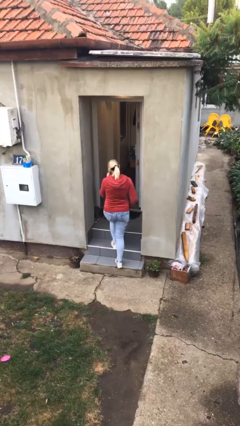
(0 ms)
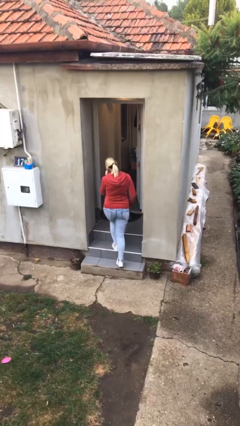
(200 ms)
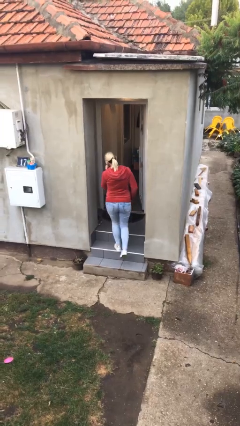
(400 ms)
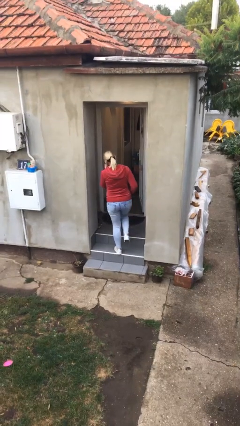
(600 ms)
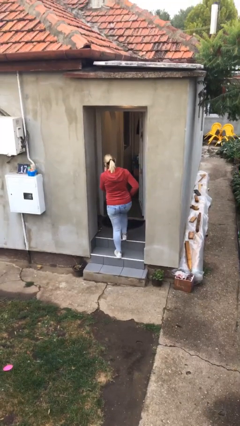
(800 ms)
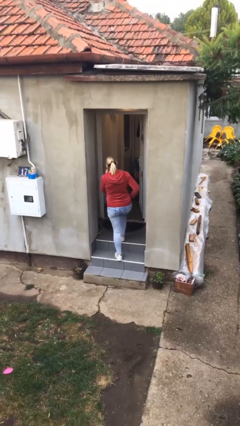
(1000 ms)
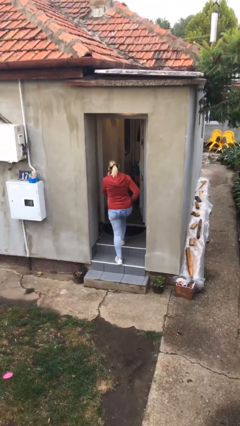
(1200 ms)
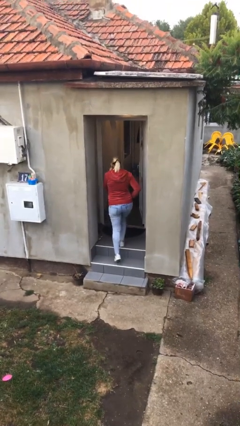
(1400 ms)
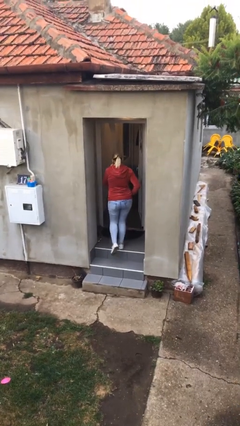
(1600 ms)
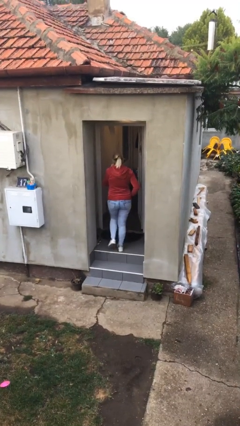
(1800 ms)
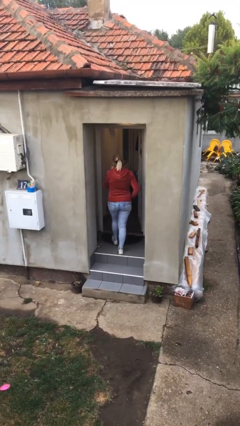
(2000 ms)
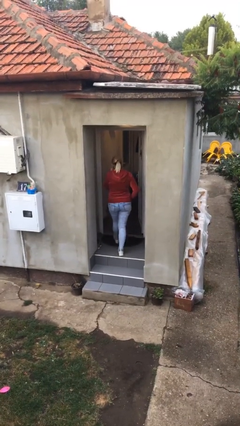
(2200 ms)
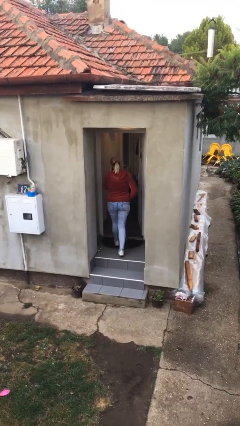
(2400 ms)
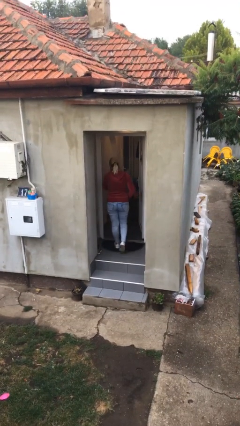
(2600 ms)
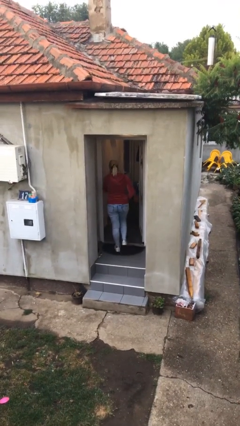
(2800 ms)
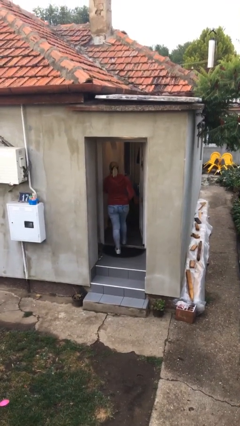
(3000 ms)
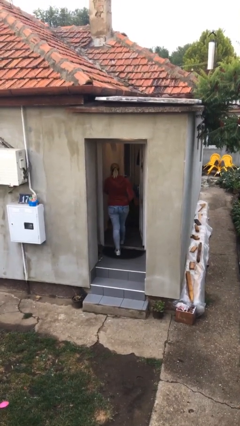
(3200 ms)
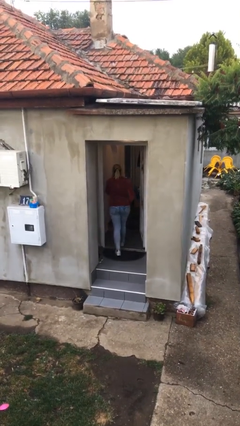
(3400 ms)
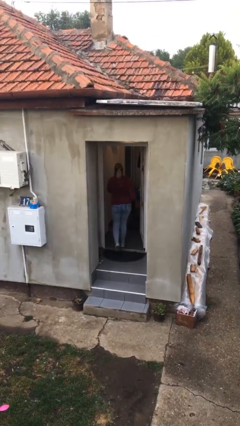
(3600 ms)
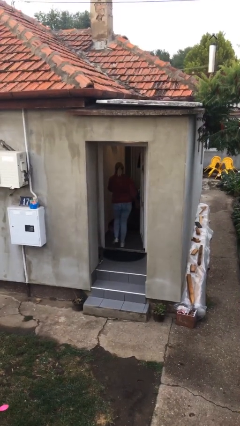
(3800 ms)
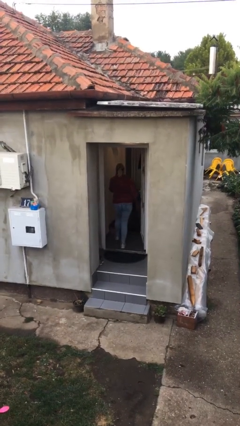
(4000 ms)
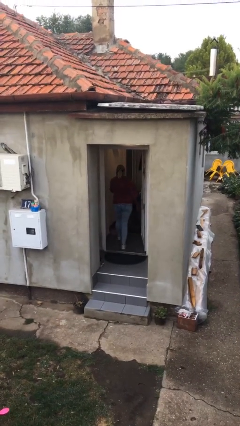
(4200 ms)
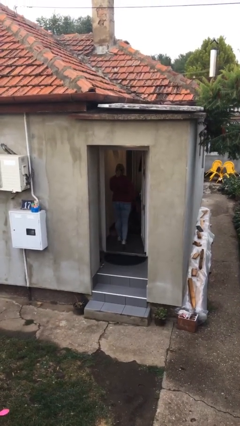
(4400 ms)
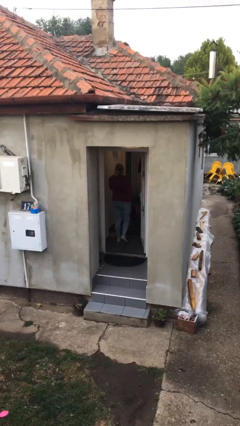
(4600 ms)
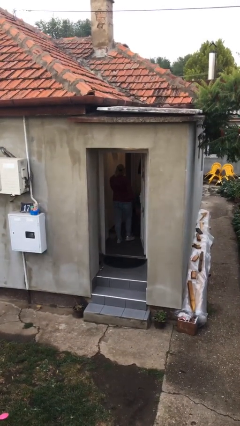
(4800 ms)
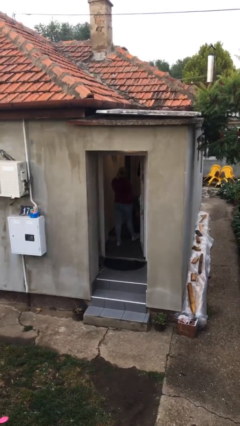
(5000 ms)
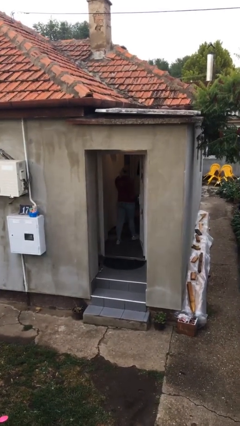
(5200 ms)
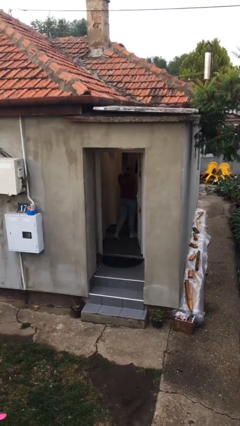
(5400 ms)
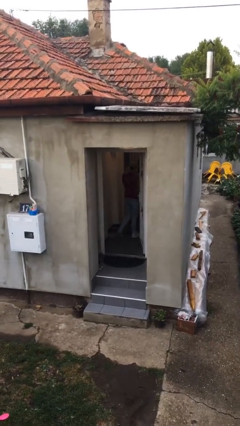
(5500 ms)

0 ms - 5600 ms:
person exits scene through structure

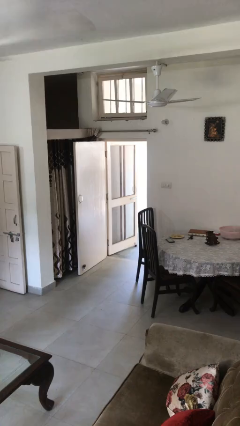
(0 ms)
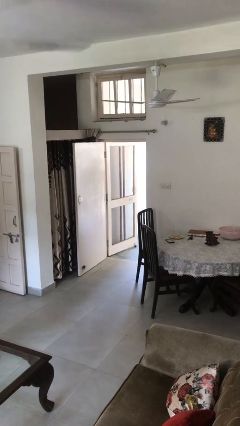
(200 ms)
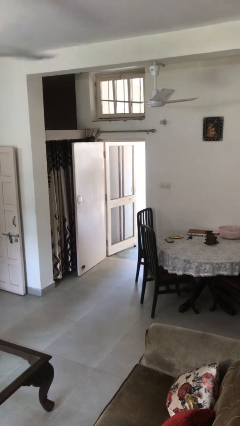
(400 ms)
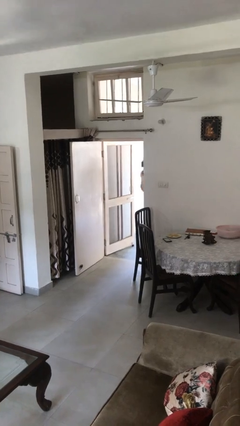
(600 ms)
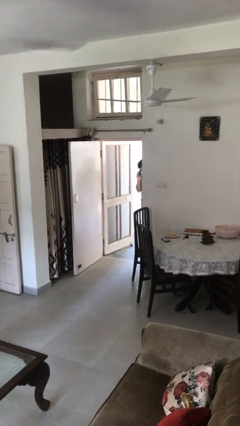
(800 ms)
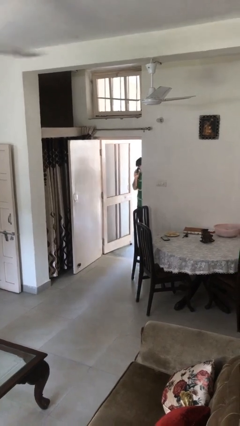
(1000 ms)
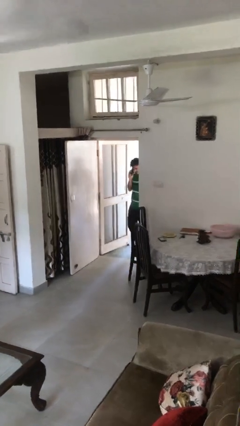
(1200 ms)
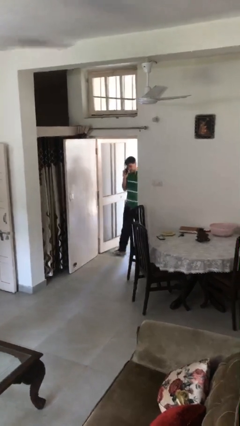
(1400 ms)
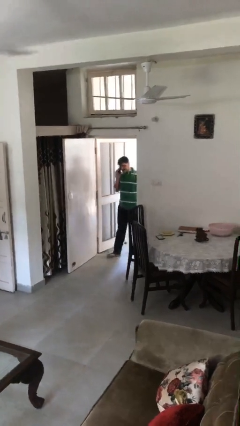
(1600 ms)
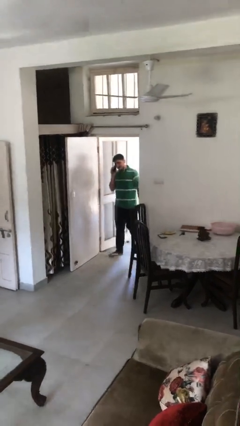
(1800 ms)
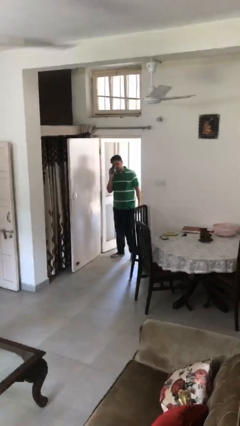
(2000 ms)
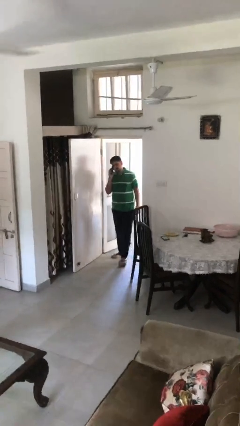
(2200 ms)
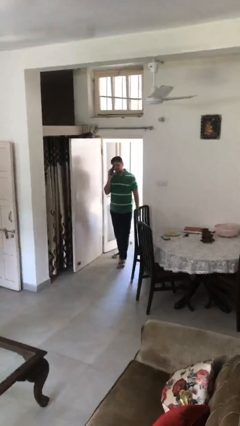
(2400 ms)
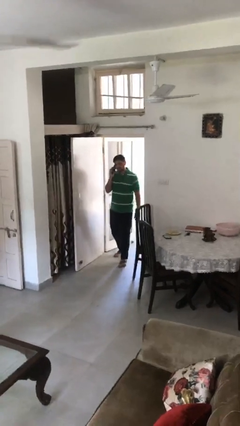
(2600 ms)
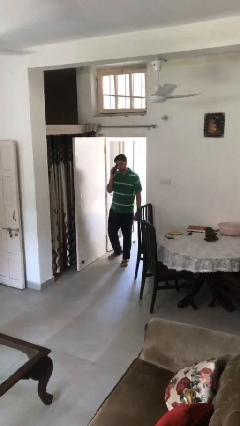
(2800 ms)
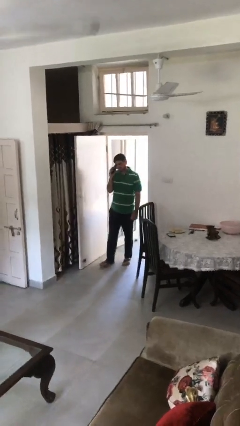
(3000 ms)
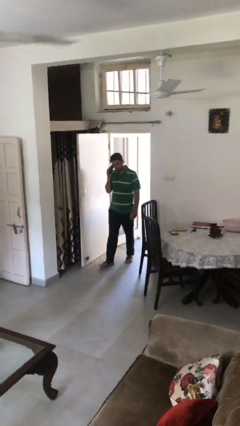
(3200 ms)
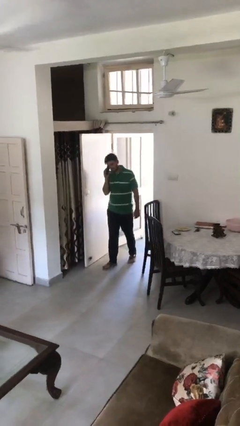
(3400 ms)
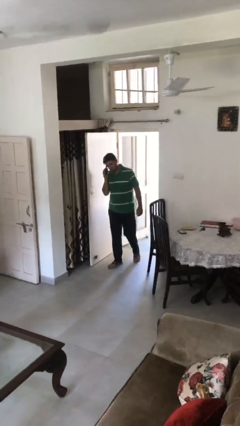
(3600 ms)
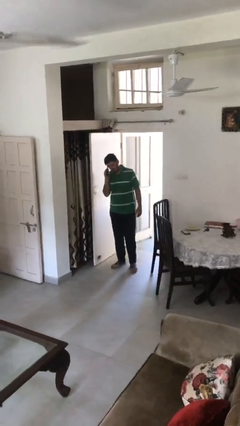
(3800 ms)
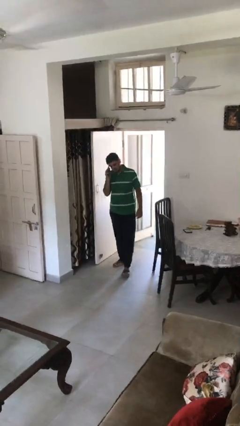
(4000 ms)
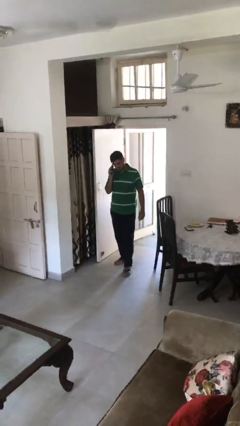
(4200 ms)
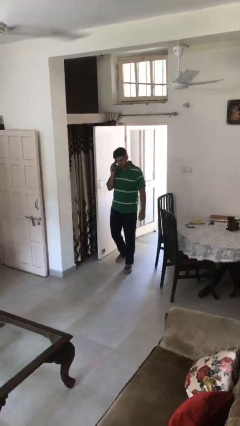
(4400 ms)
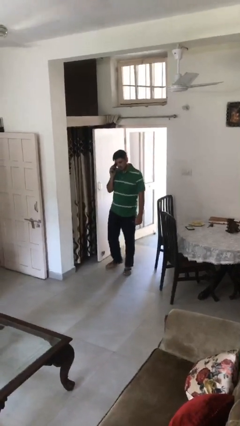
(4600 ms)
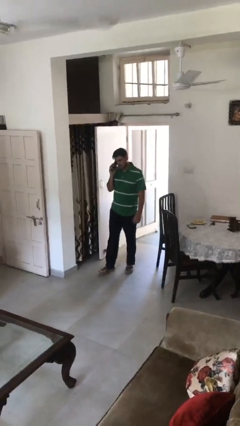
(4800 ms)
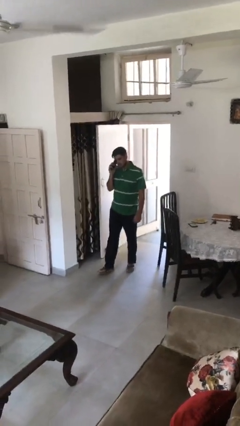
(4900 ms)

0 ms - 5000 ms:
person enters scene through structure

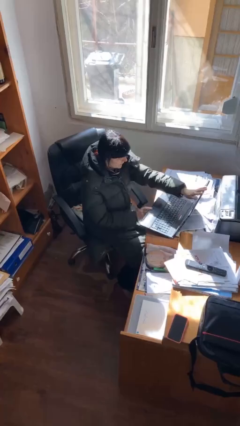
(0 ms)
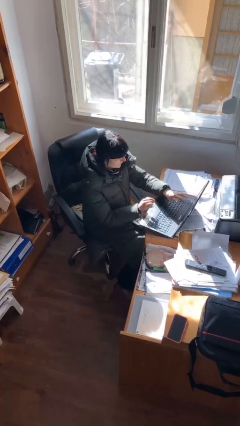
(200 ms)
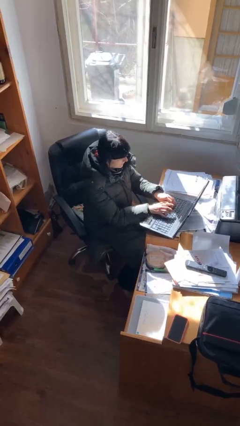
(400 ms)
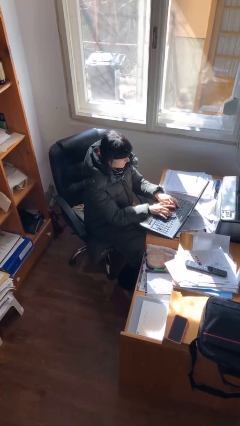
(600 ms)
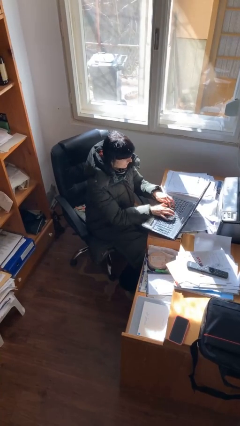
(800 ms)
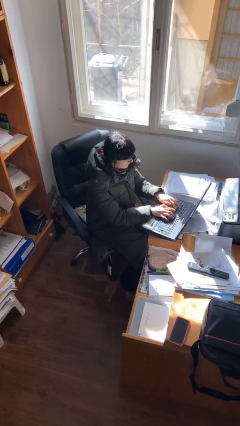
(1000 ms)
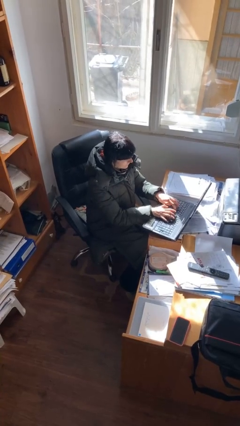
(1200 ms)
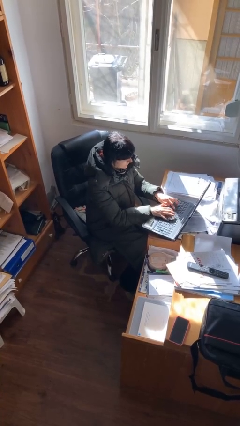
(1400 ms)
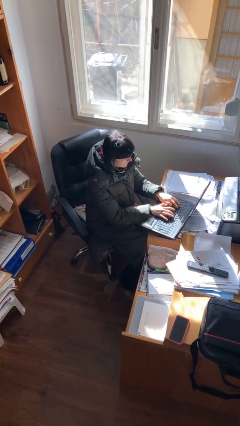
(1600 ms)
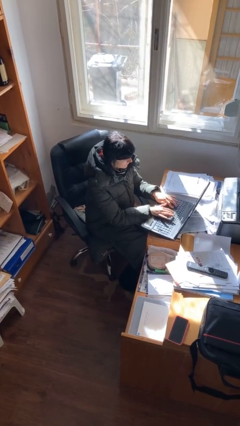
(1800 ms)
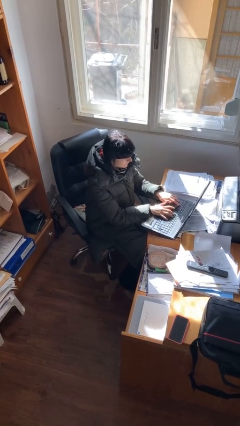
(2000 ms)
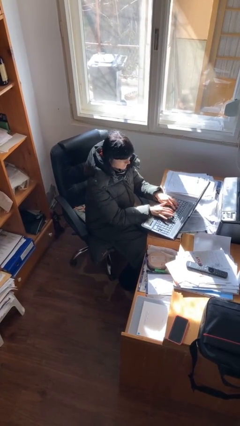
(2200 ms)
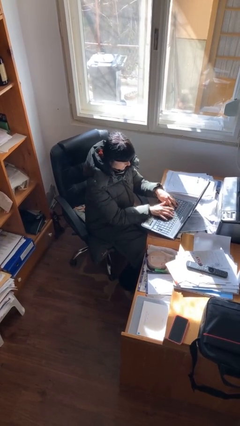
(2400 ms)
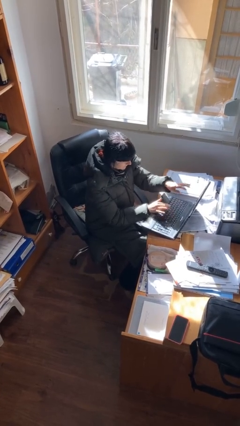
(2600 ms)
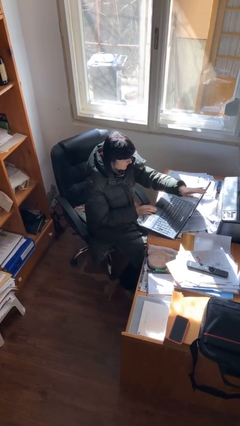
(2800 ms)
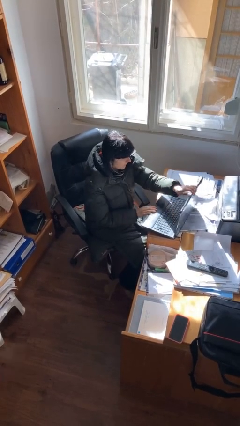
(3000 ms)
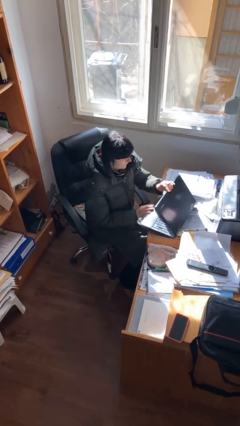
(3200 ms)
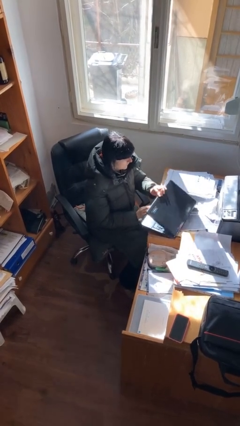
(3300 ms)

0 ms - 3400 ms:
person interacts with laptop

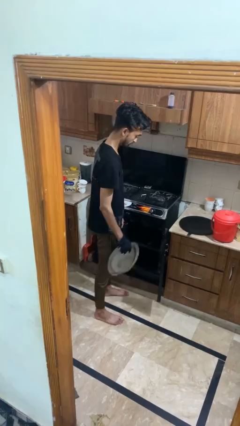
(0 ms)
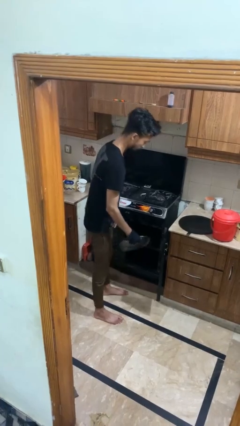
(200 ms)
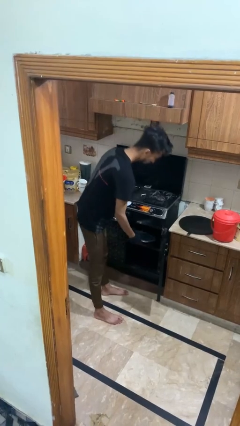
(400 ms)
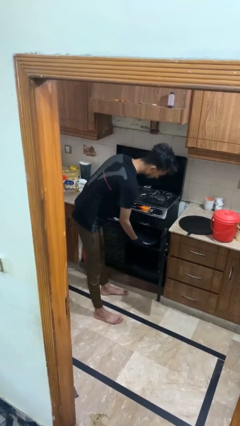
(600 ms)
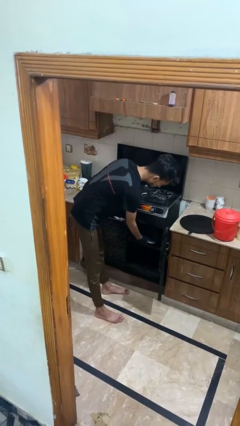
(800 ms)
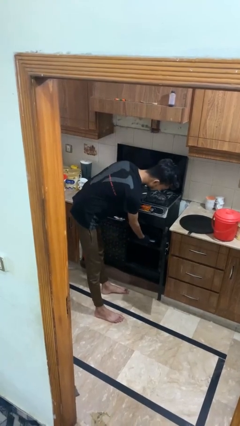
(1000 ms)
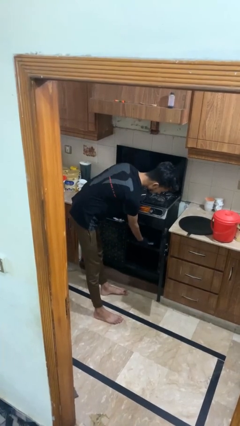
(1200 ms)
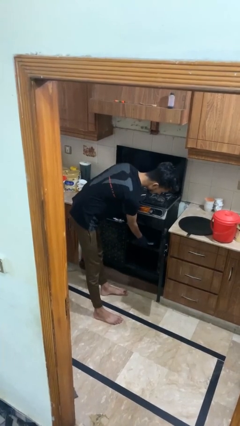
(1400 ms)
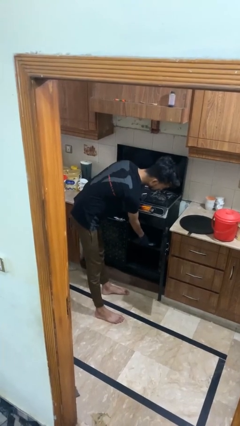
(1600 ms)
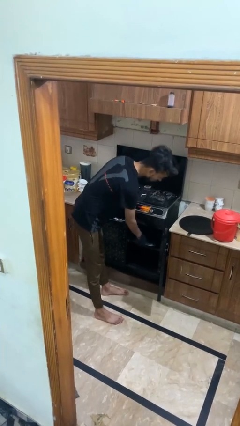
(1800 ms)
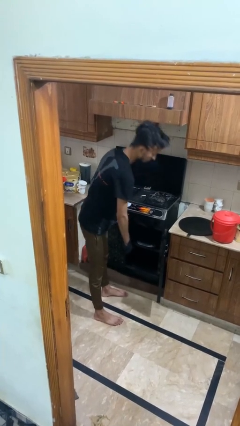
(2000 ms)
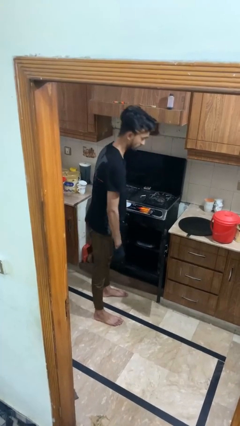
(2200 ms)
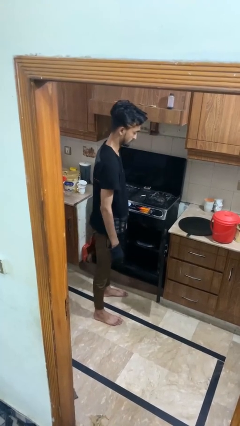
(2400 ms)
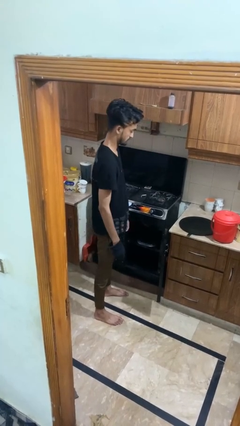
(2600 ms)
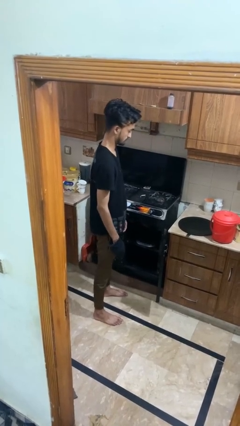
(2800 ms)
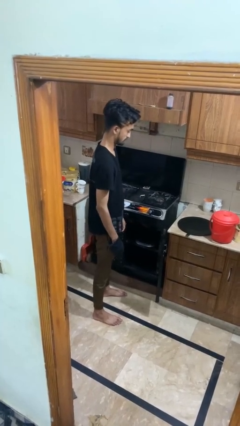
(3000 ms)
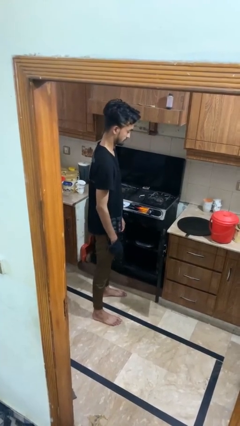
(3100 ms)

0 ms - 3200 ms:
person puts object into oven

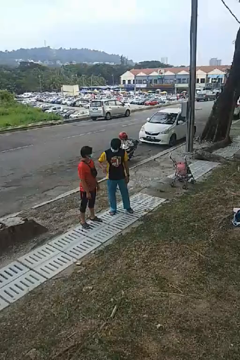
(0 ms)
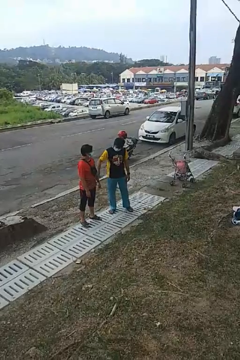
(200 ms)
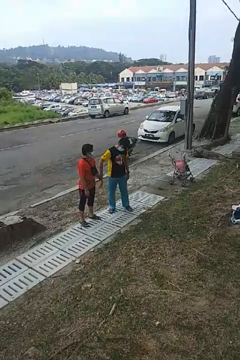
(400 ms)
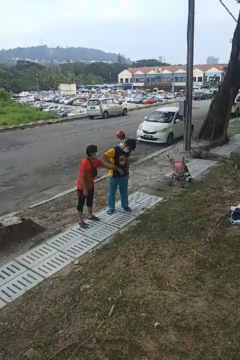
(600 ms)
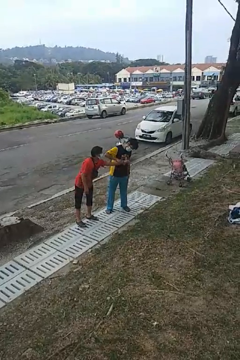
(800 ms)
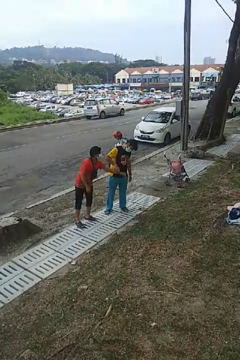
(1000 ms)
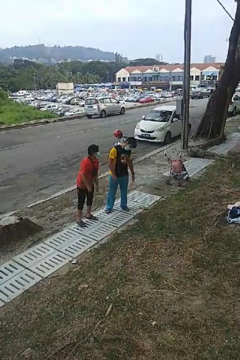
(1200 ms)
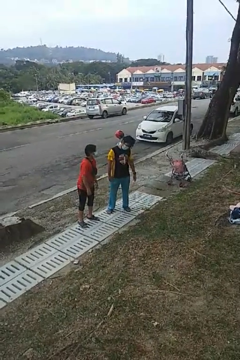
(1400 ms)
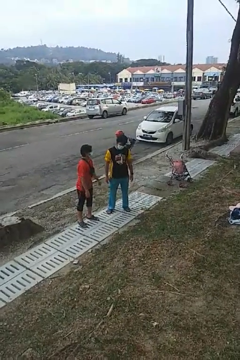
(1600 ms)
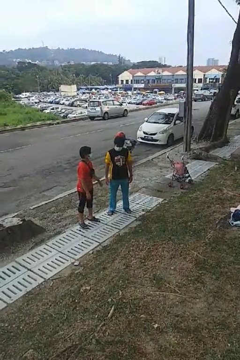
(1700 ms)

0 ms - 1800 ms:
person grabs person by forearm
